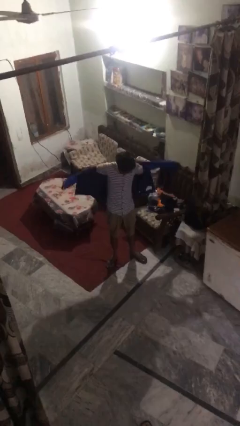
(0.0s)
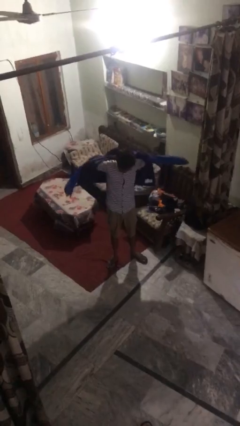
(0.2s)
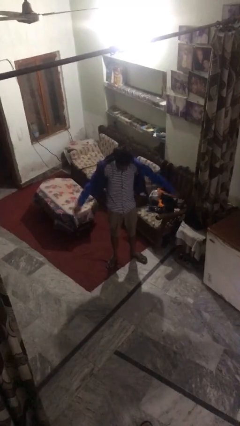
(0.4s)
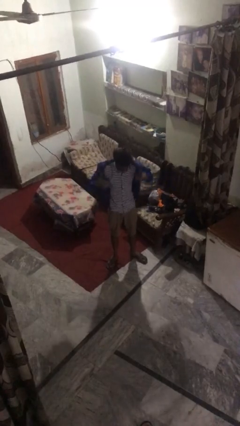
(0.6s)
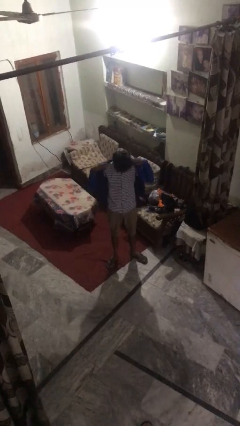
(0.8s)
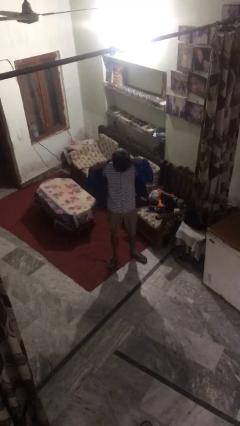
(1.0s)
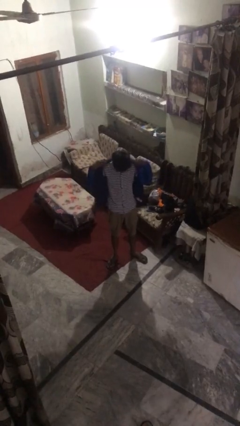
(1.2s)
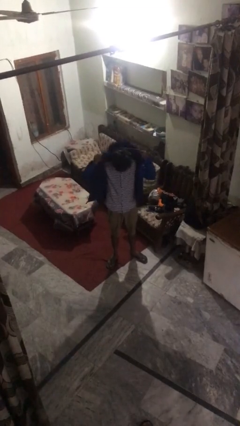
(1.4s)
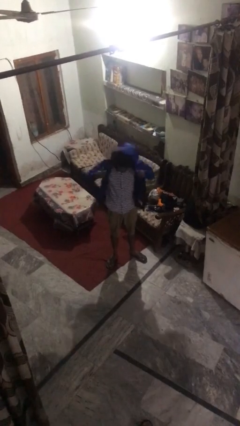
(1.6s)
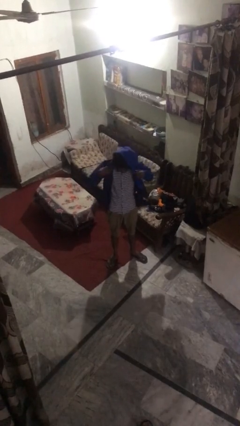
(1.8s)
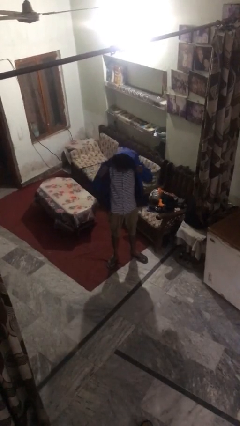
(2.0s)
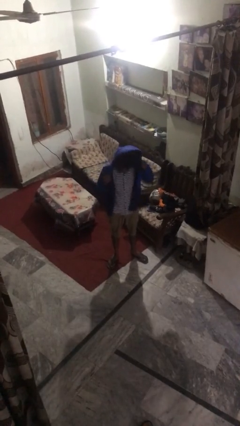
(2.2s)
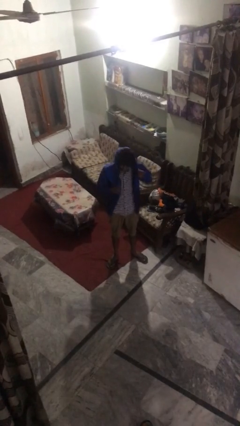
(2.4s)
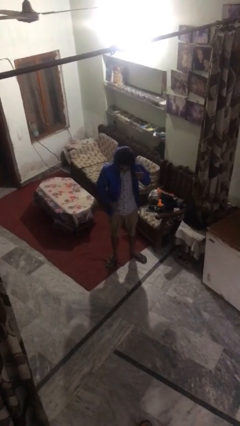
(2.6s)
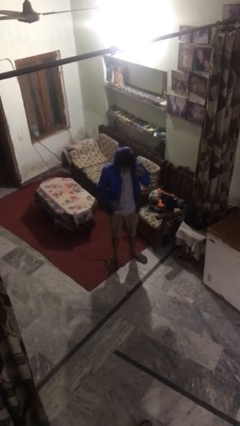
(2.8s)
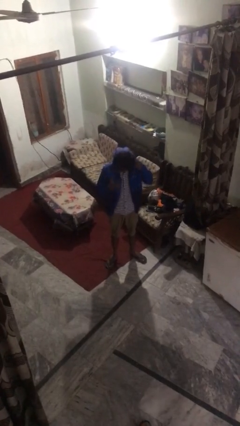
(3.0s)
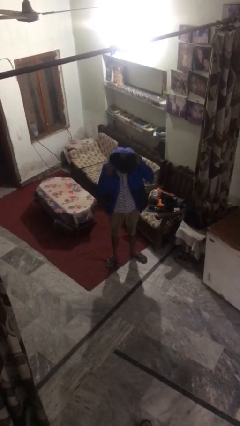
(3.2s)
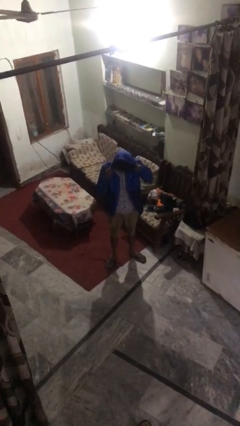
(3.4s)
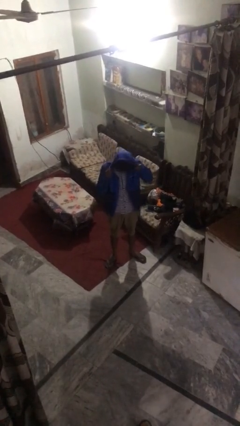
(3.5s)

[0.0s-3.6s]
person puts on hoodie

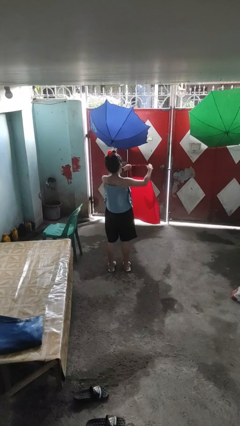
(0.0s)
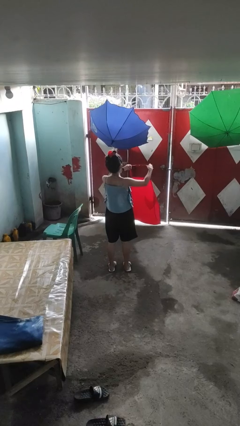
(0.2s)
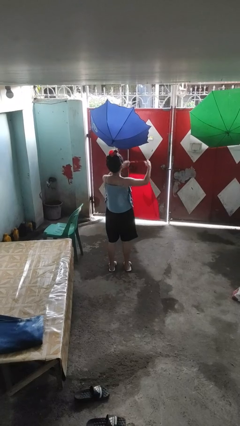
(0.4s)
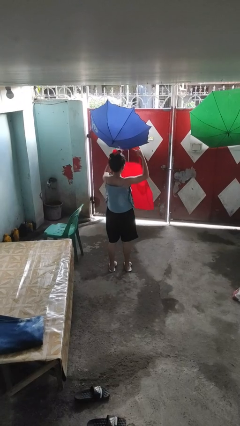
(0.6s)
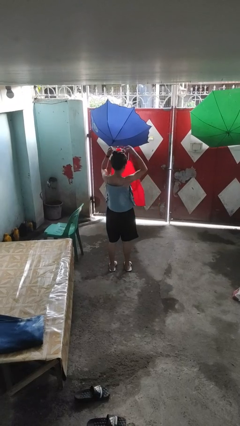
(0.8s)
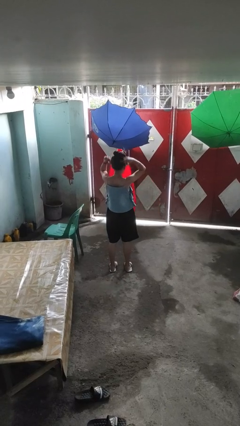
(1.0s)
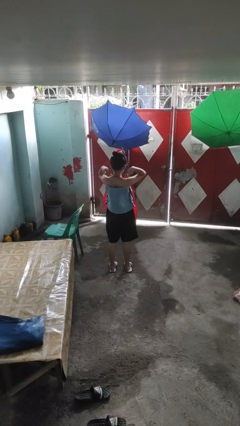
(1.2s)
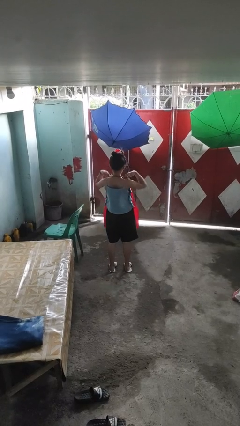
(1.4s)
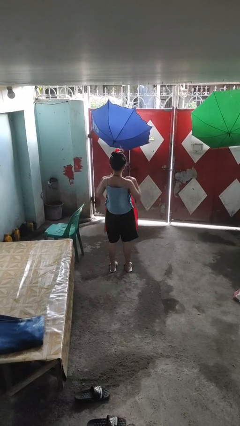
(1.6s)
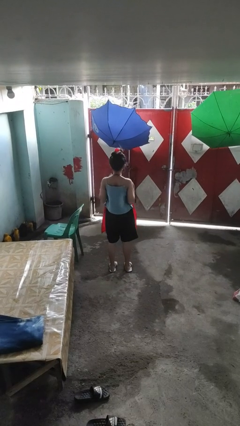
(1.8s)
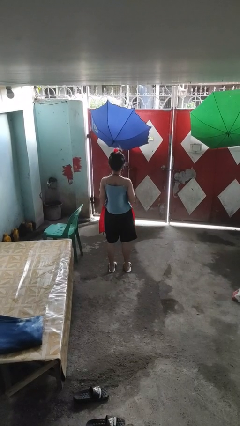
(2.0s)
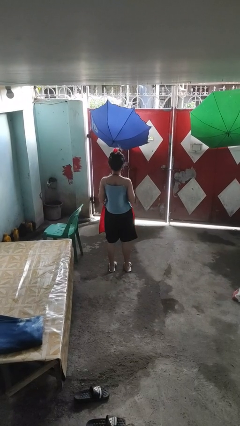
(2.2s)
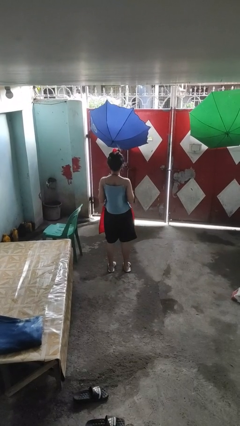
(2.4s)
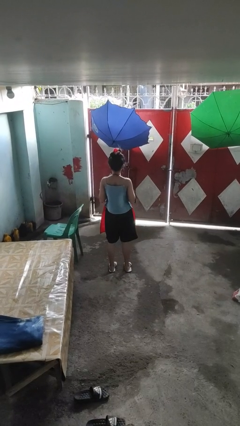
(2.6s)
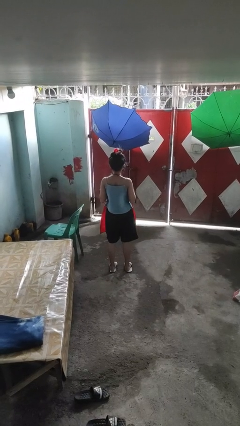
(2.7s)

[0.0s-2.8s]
person puts on apron

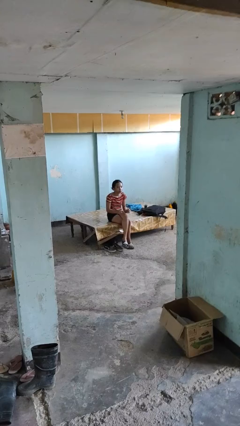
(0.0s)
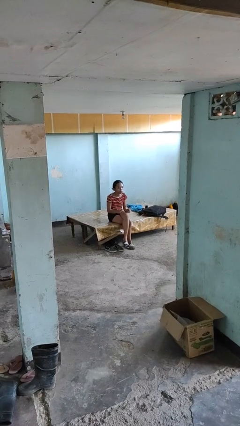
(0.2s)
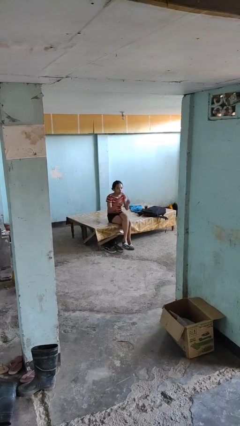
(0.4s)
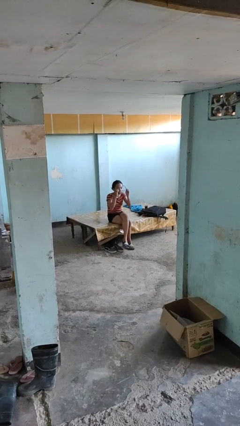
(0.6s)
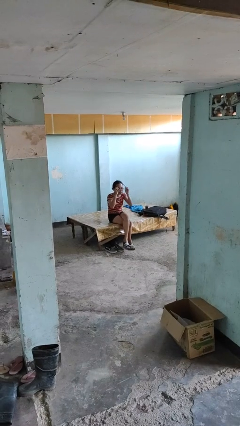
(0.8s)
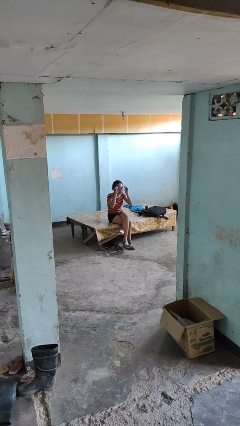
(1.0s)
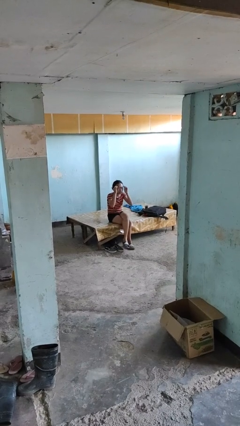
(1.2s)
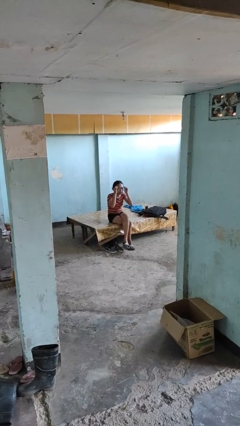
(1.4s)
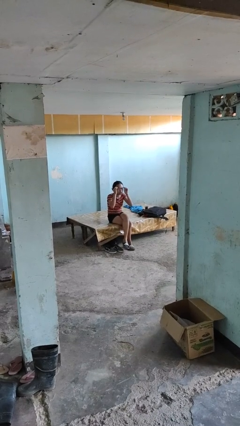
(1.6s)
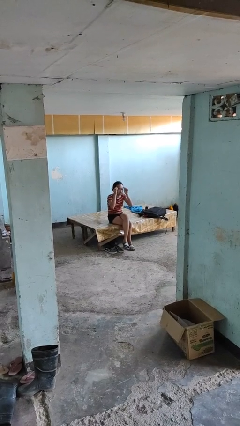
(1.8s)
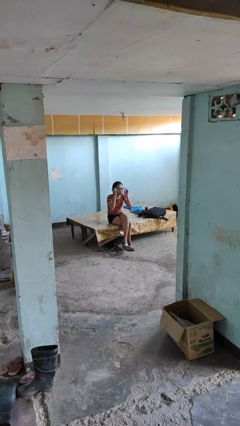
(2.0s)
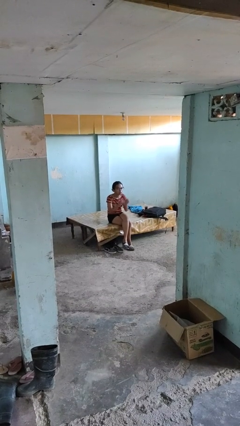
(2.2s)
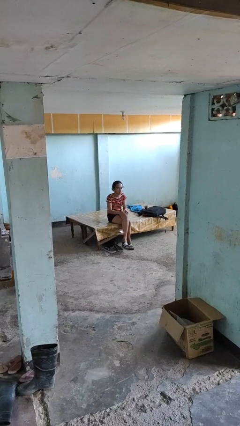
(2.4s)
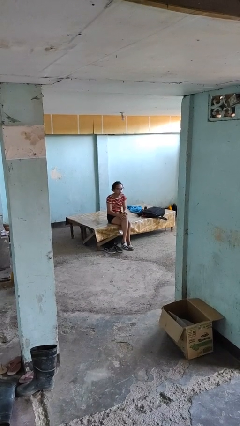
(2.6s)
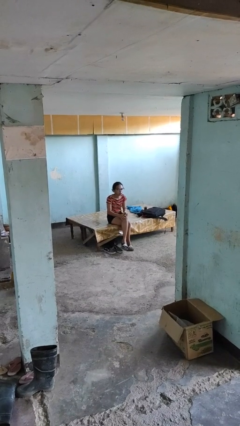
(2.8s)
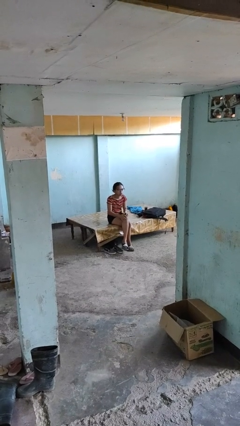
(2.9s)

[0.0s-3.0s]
person puts on glasses

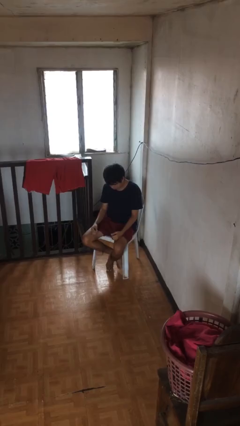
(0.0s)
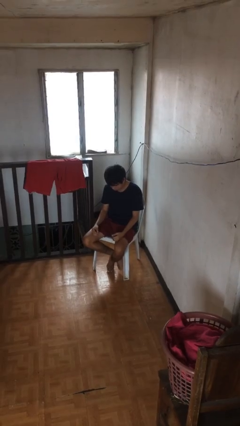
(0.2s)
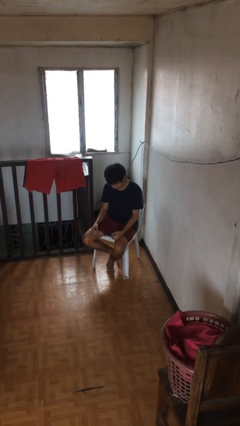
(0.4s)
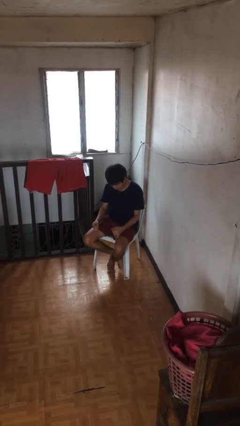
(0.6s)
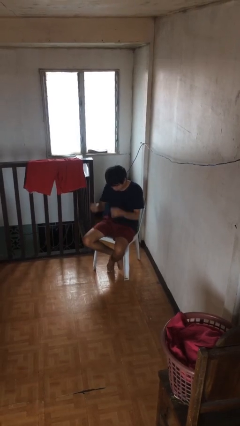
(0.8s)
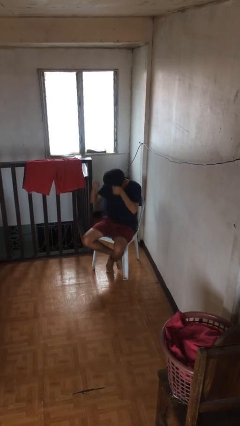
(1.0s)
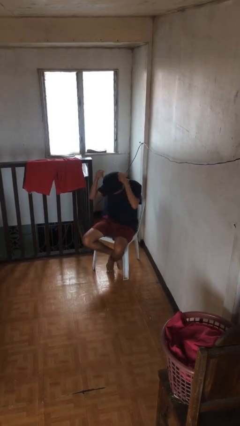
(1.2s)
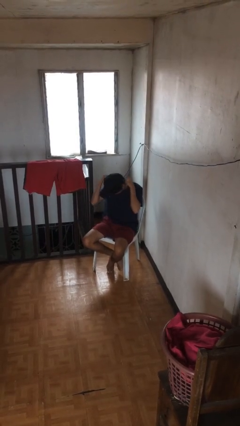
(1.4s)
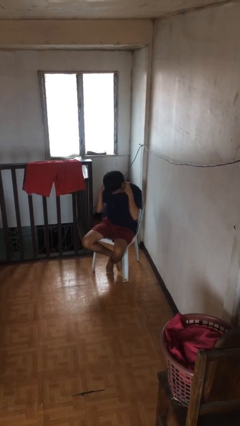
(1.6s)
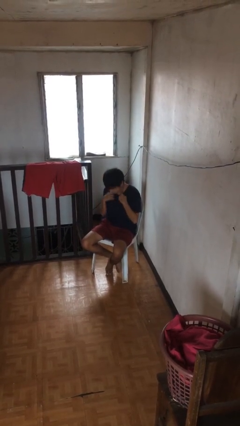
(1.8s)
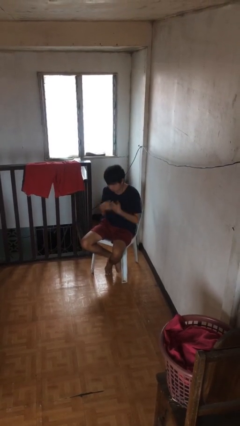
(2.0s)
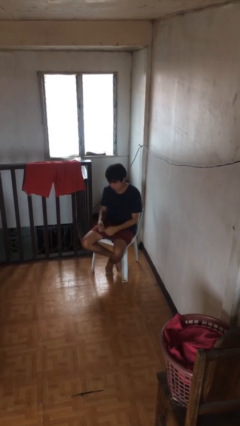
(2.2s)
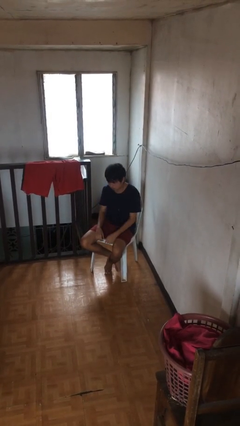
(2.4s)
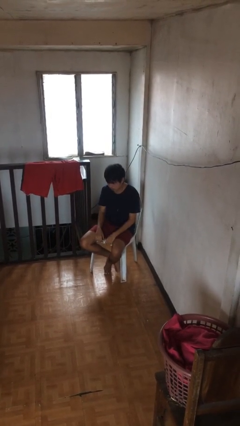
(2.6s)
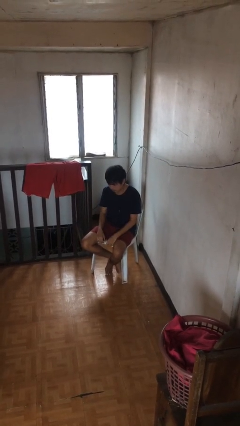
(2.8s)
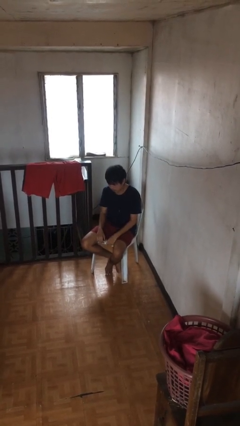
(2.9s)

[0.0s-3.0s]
person puts on necklace

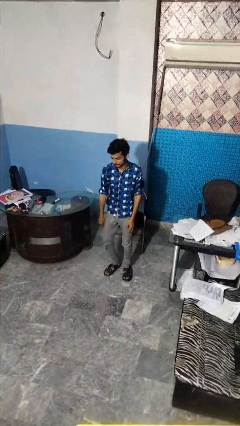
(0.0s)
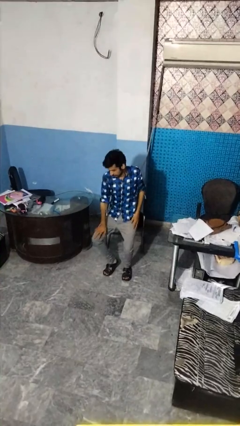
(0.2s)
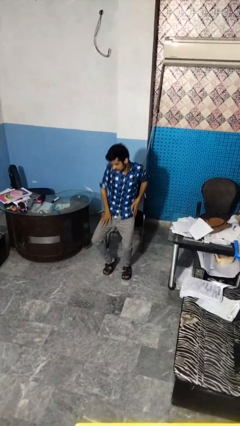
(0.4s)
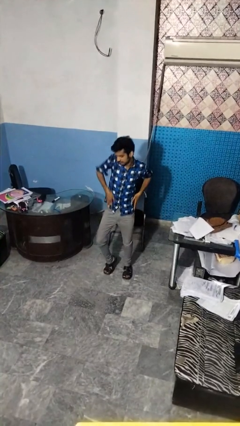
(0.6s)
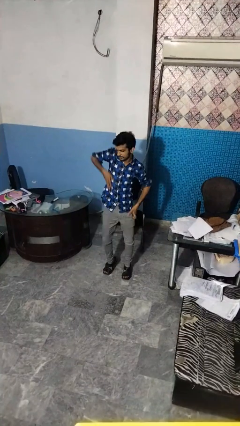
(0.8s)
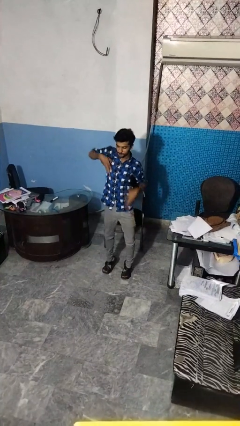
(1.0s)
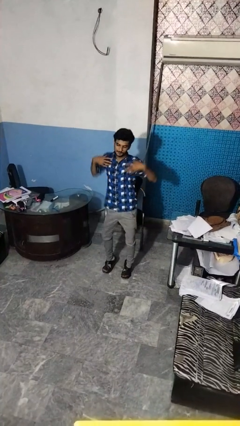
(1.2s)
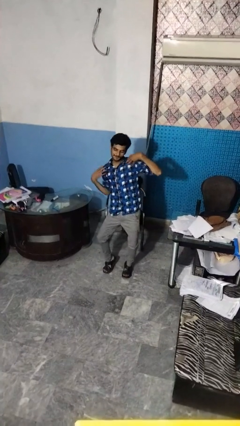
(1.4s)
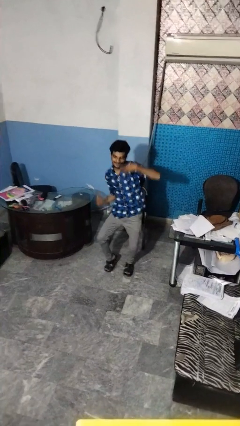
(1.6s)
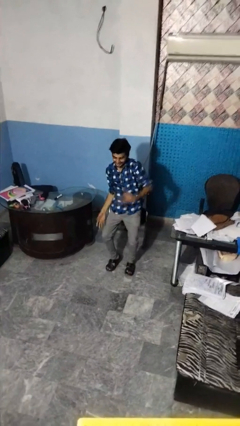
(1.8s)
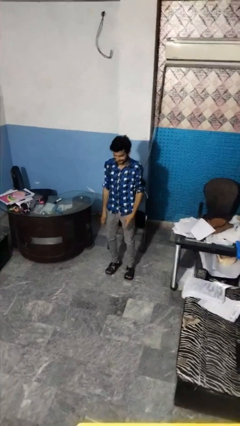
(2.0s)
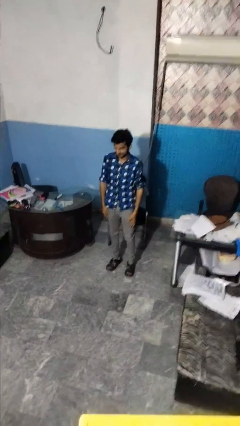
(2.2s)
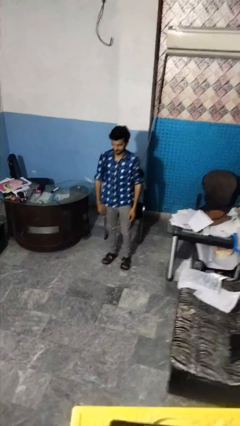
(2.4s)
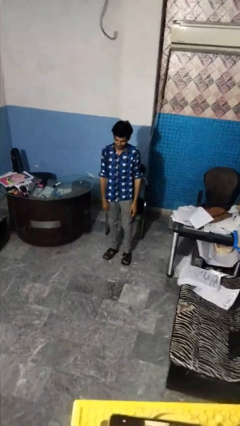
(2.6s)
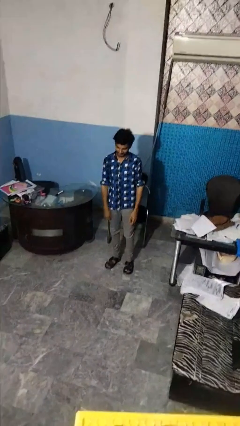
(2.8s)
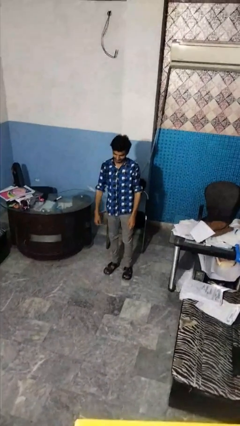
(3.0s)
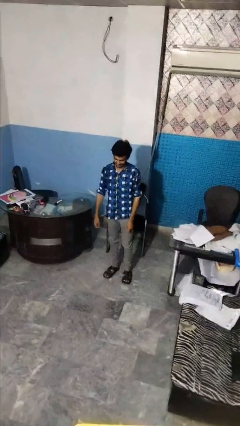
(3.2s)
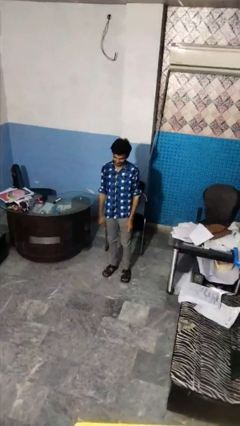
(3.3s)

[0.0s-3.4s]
person dances in place

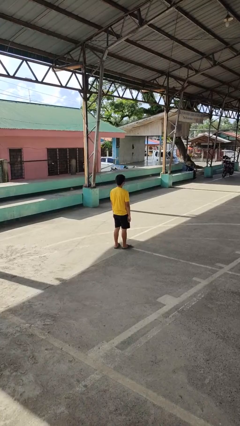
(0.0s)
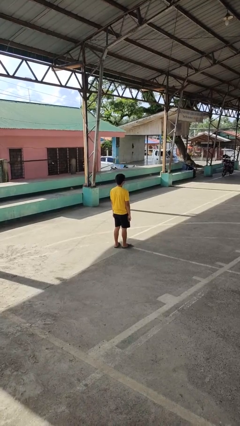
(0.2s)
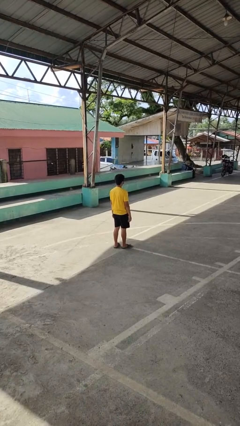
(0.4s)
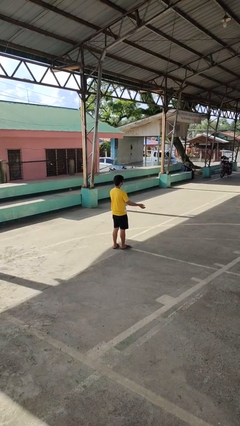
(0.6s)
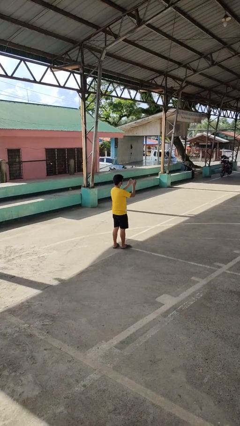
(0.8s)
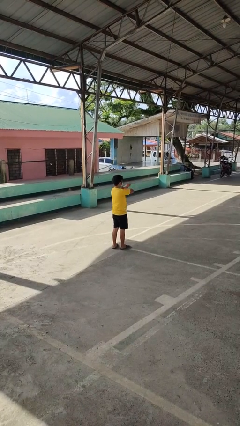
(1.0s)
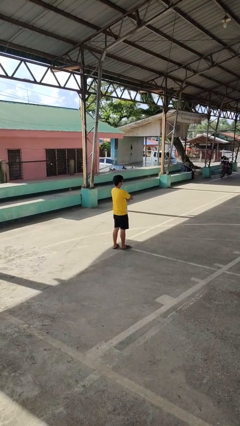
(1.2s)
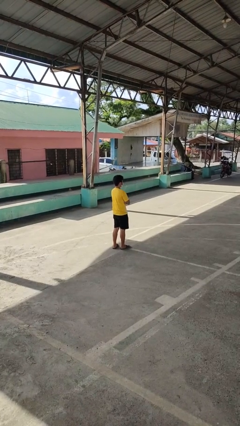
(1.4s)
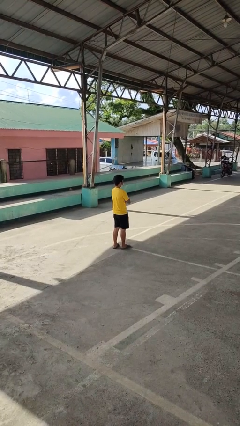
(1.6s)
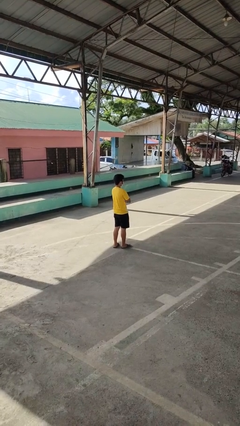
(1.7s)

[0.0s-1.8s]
person crosses arms
